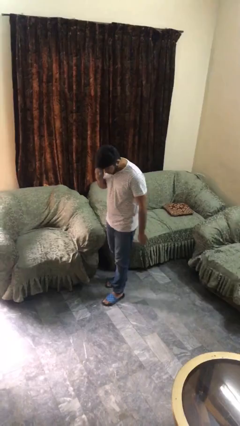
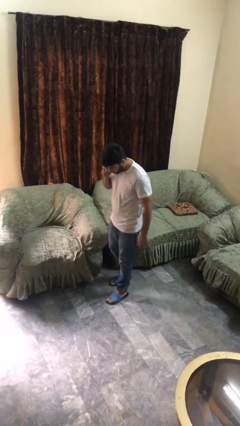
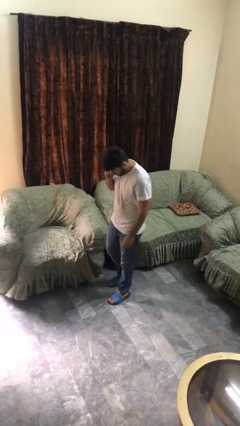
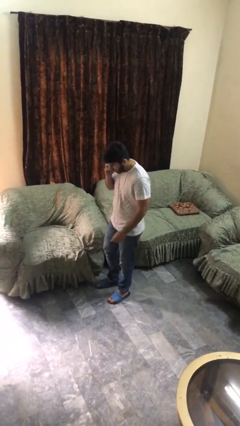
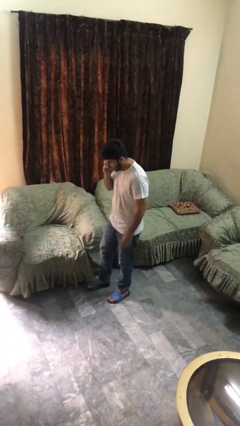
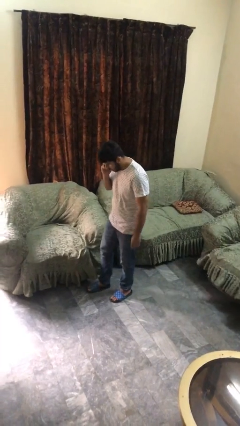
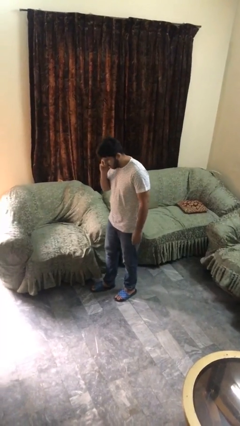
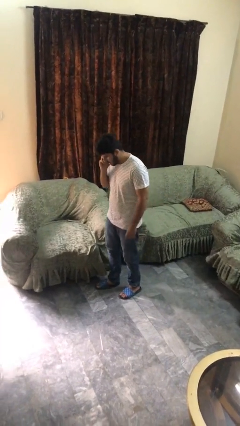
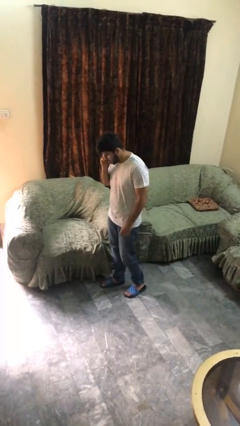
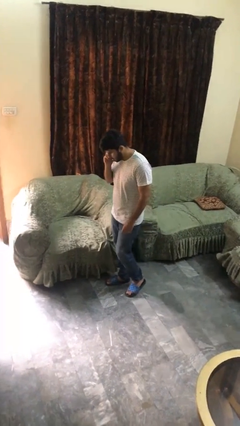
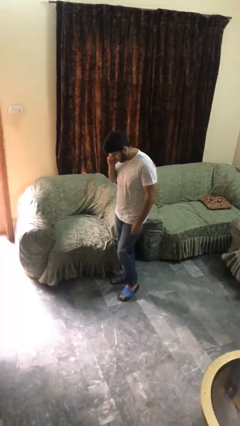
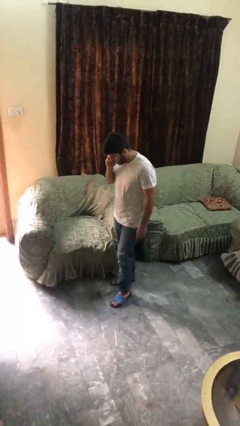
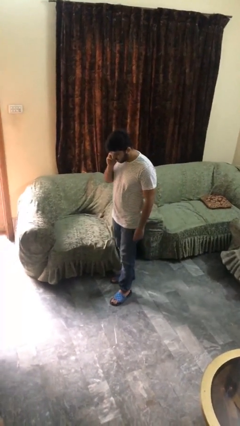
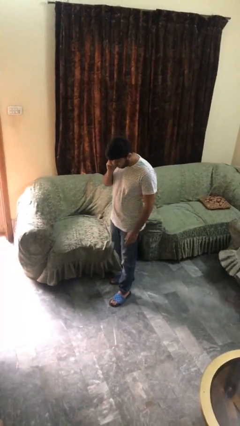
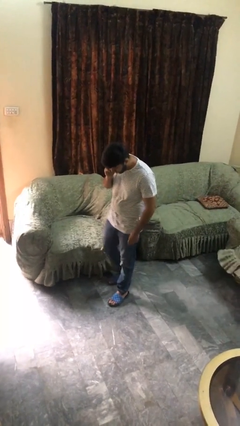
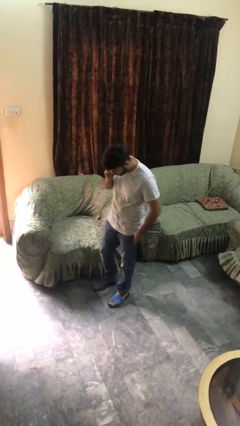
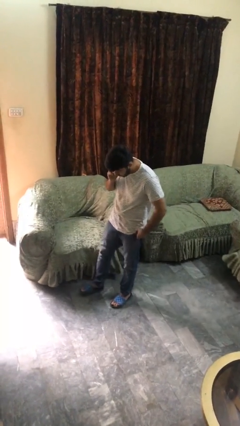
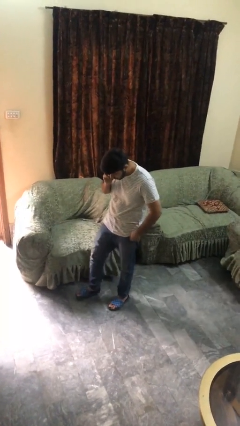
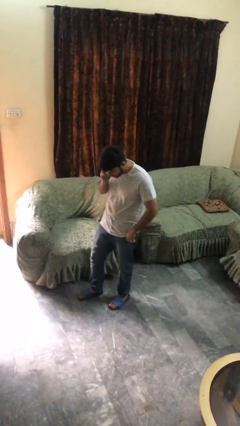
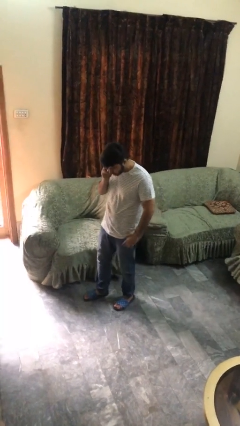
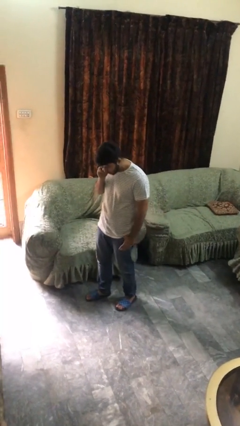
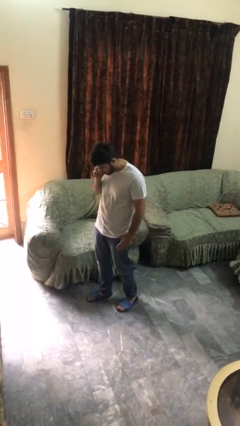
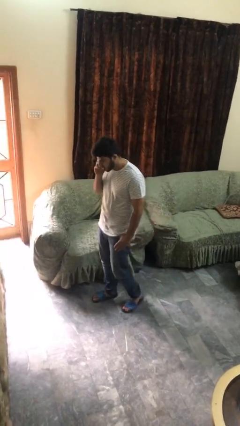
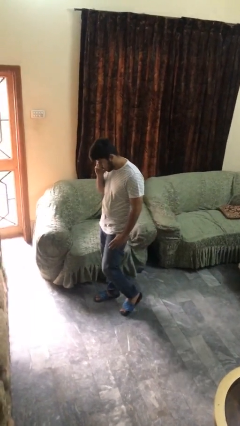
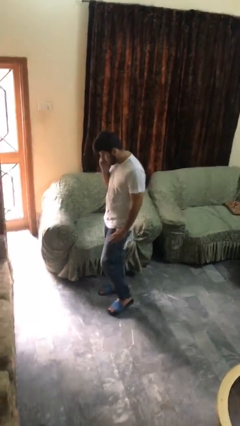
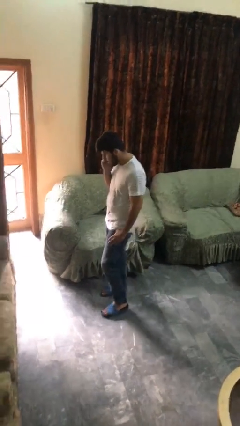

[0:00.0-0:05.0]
person talks on phone

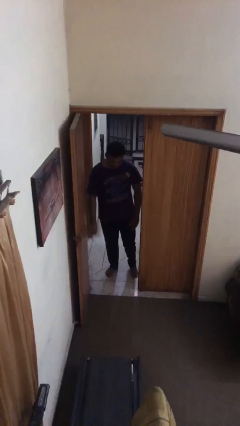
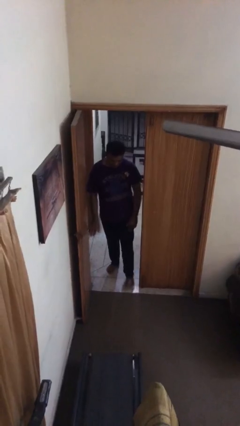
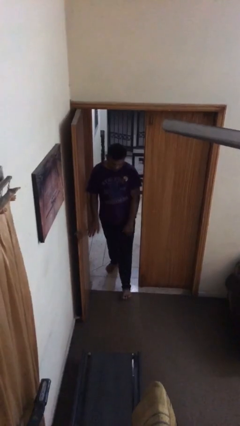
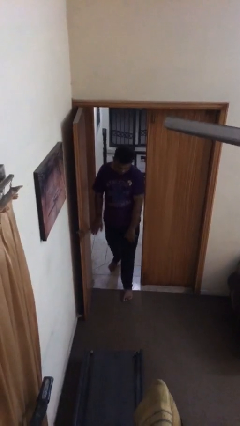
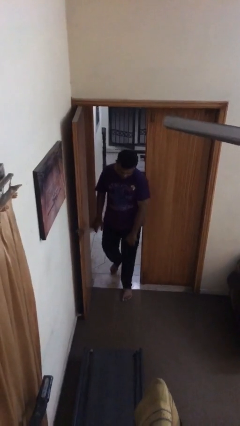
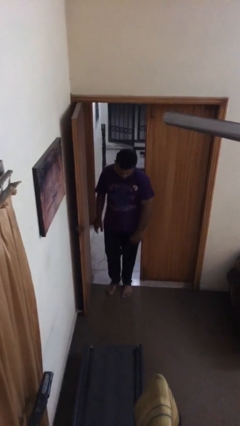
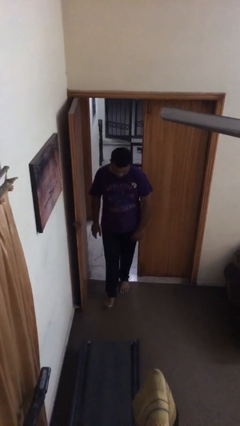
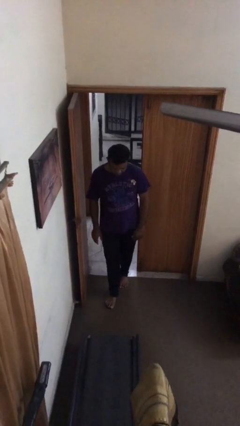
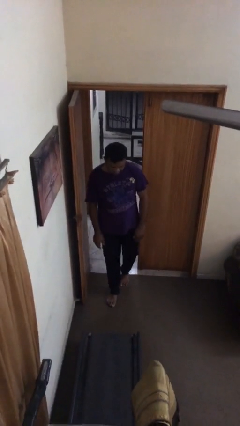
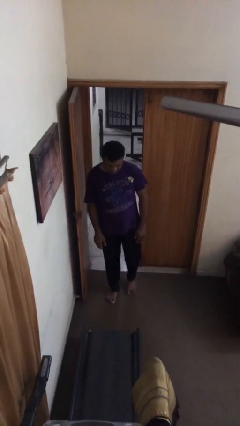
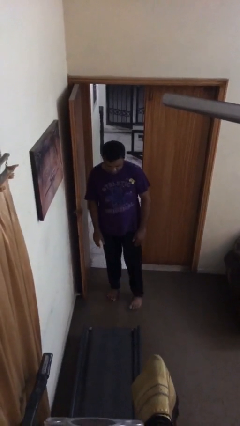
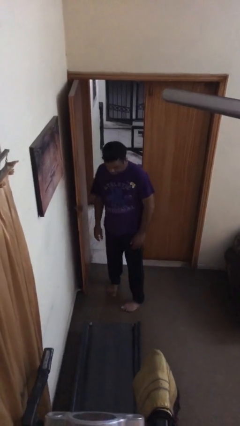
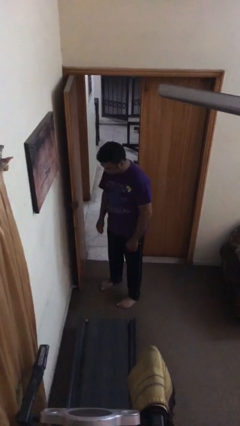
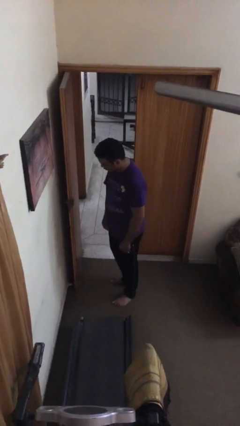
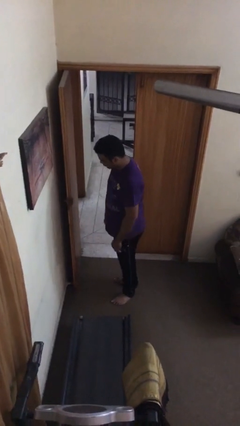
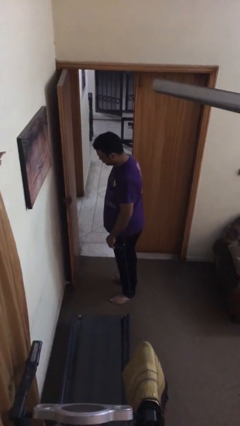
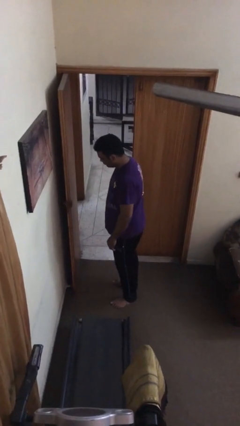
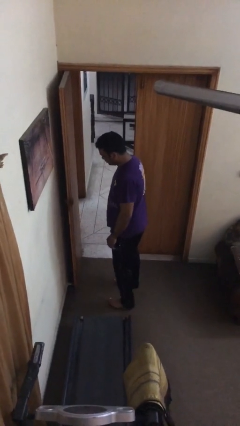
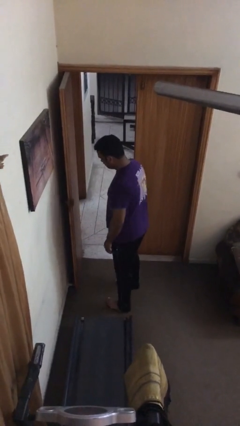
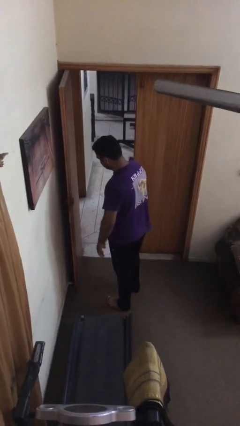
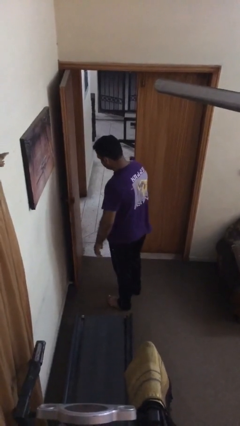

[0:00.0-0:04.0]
person enters scene through structure

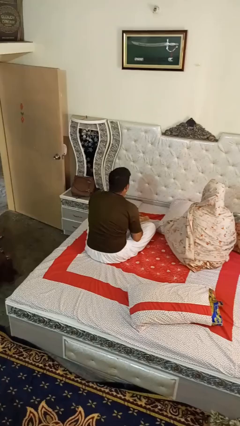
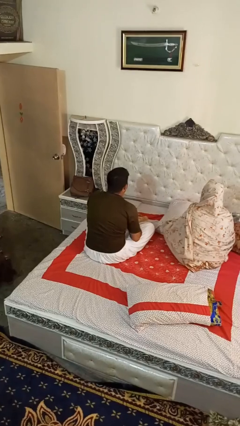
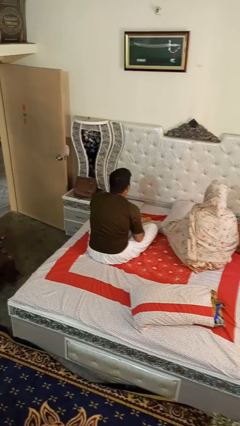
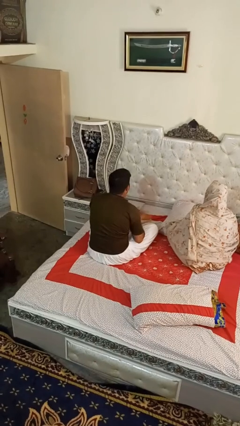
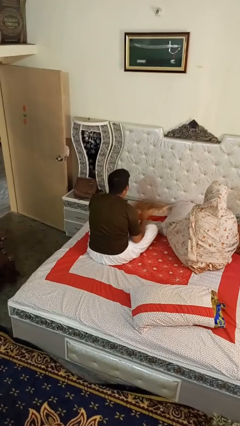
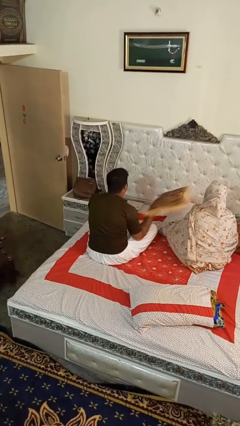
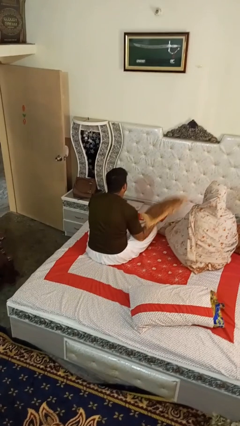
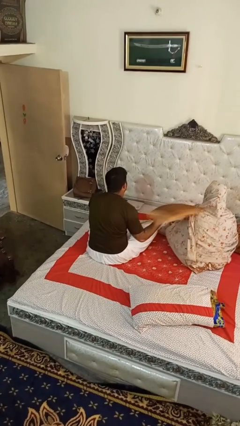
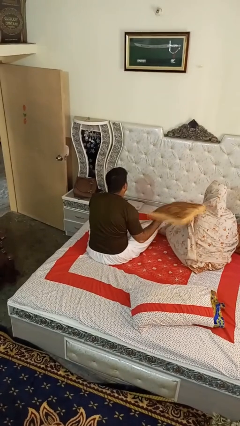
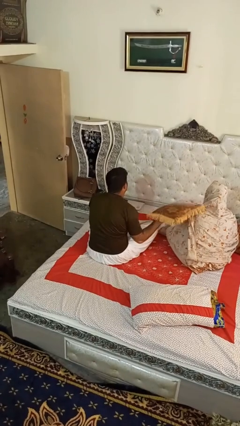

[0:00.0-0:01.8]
person hits person with pillow

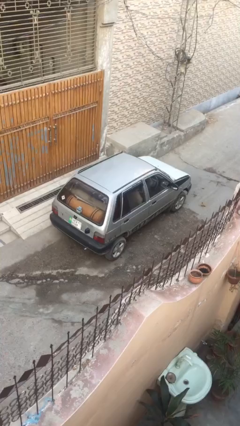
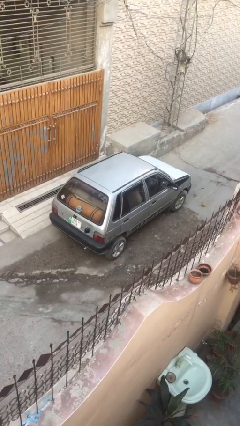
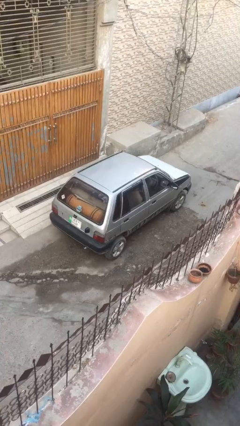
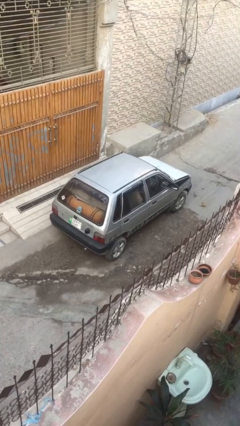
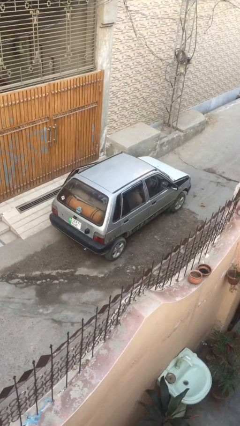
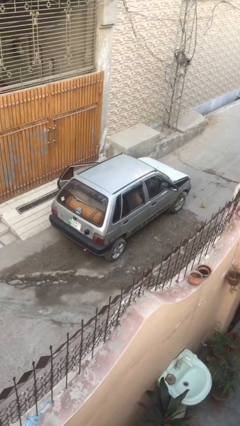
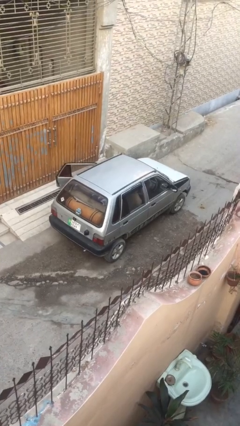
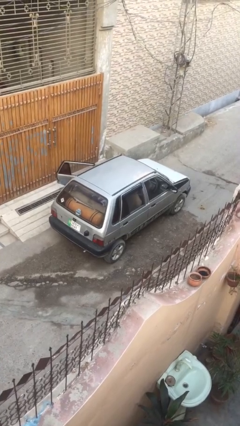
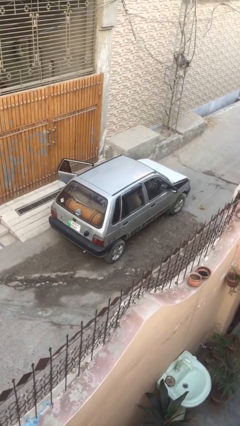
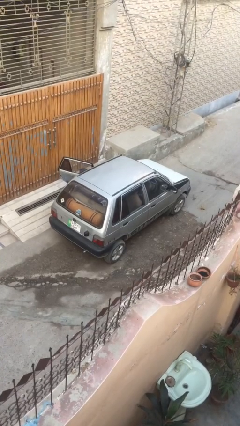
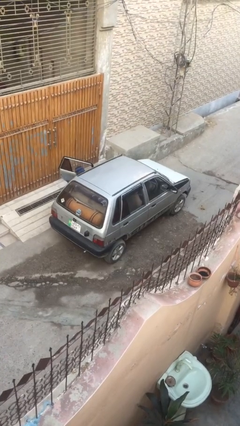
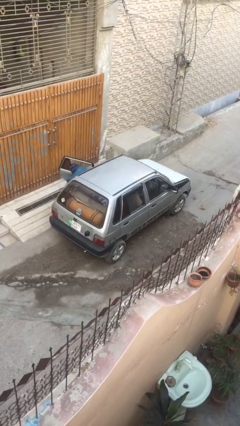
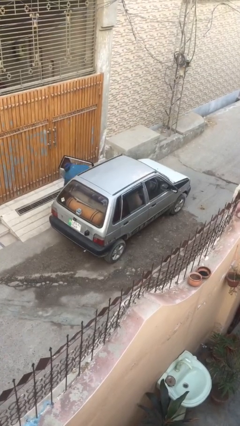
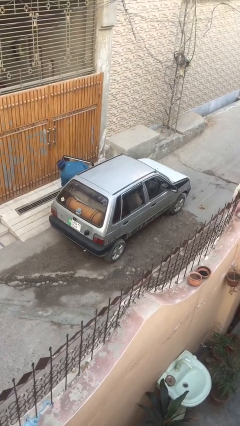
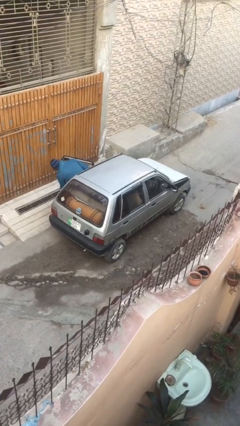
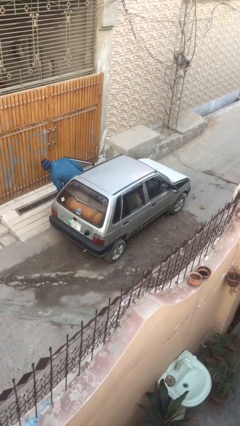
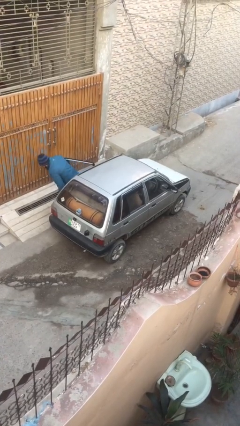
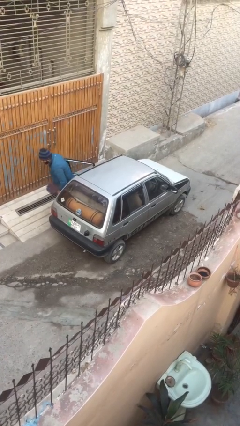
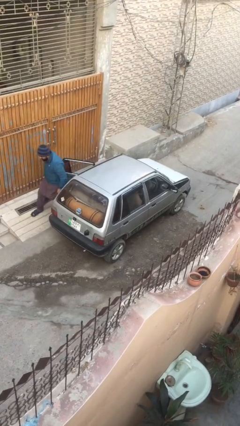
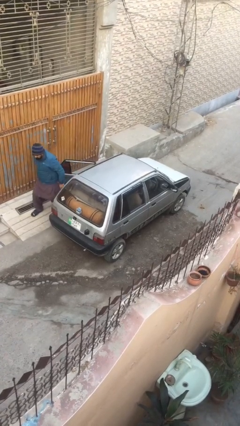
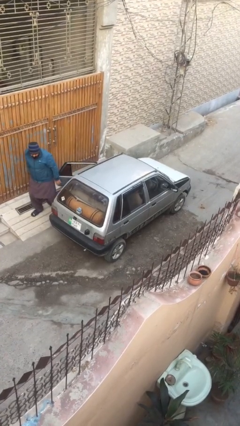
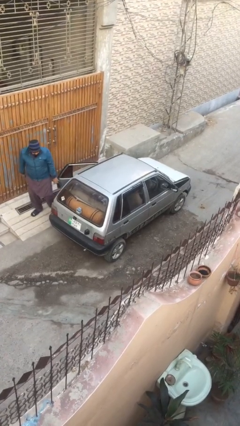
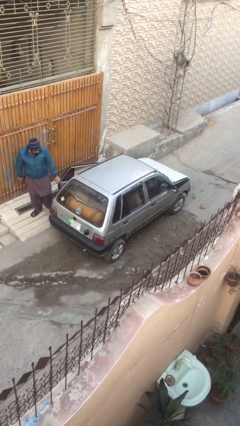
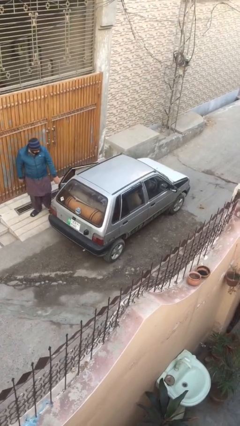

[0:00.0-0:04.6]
car drops off person

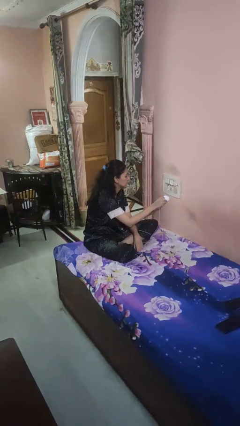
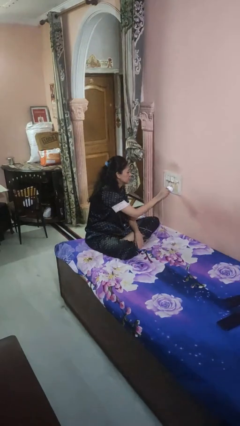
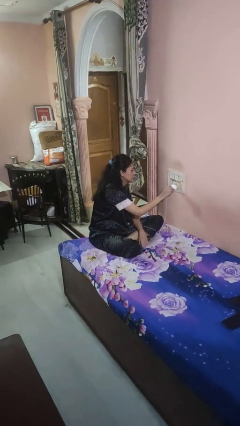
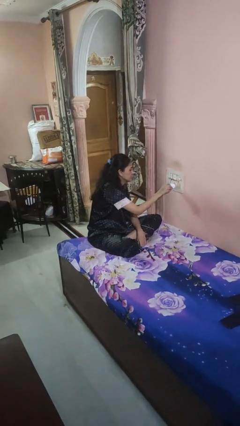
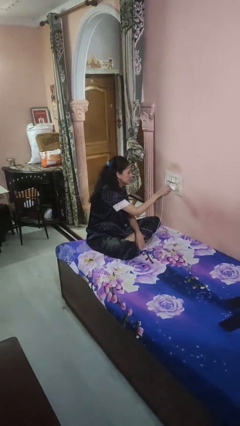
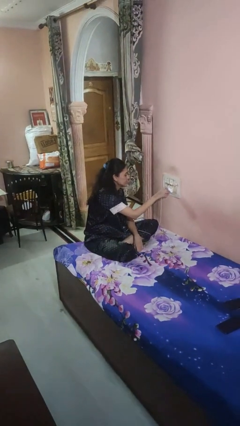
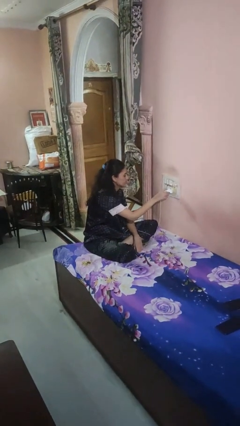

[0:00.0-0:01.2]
person plugs into electrical socket

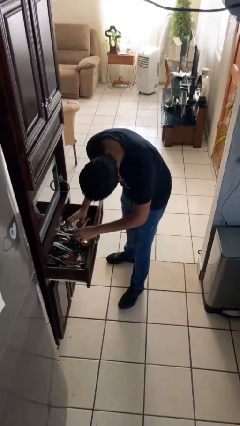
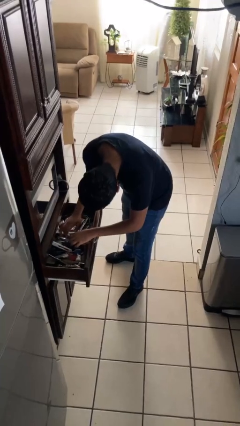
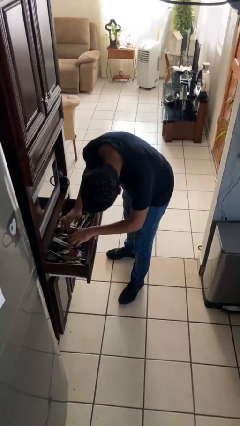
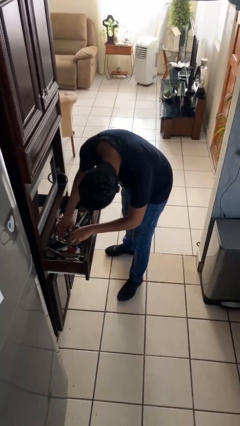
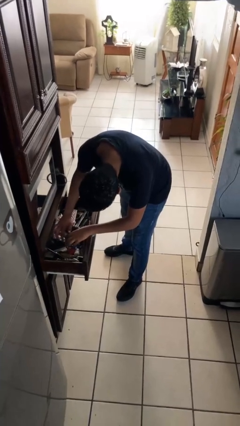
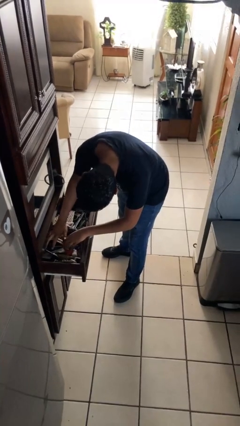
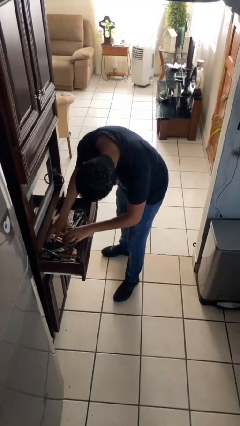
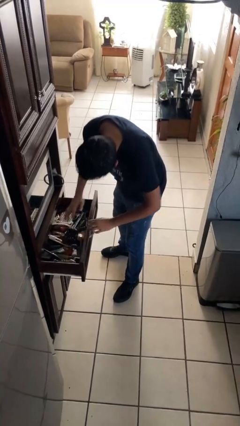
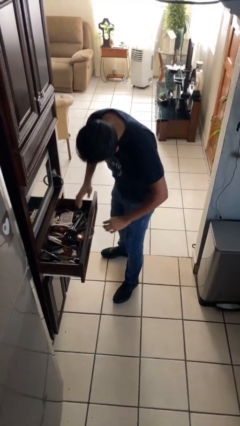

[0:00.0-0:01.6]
person searches in kitchen drawer
